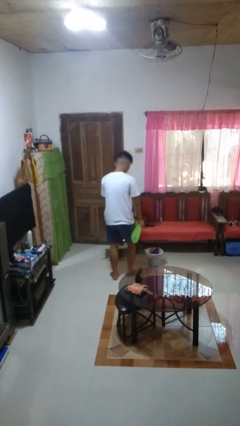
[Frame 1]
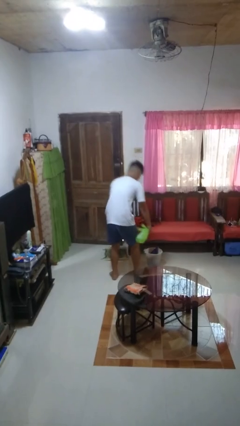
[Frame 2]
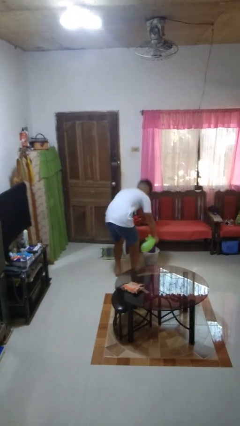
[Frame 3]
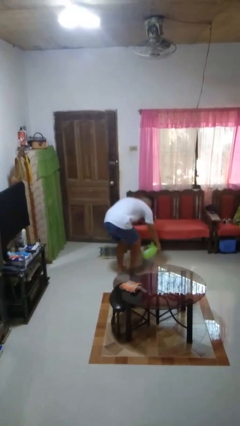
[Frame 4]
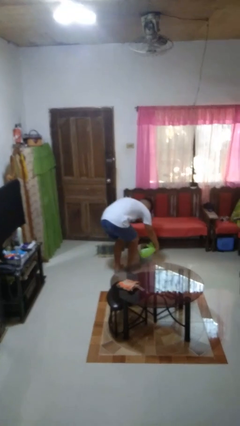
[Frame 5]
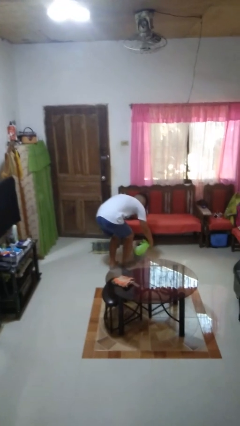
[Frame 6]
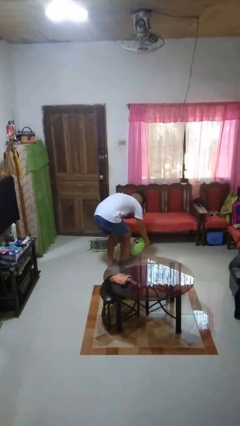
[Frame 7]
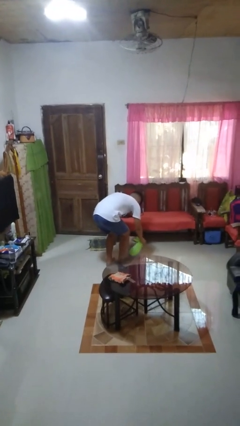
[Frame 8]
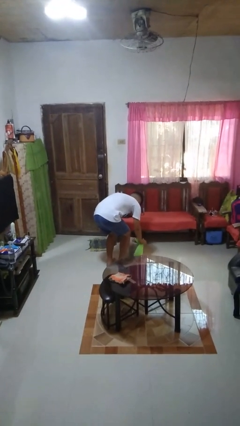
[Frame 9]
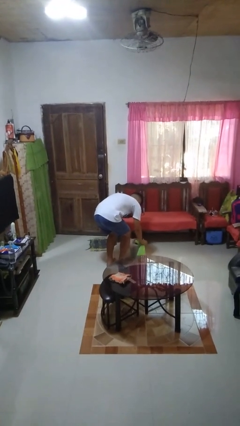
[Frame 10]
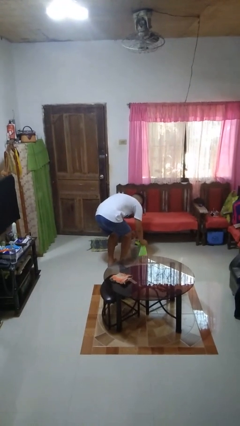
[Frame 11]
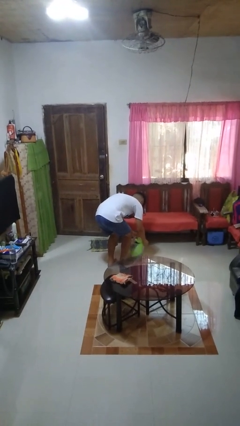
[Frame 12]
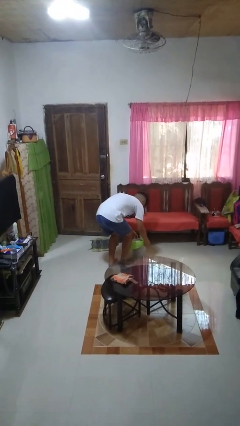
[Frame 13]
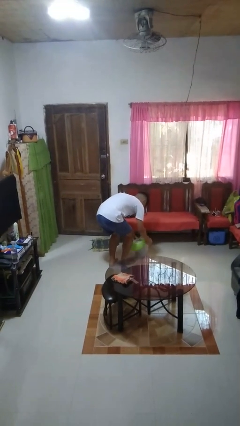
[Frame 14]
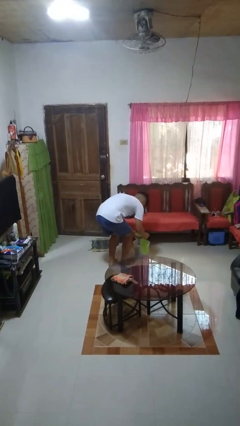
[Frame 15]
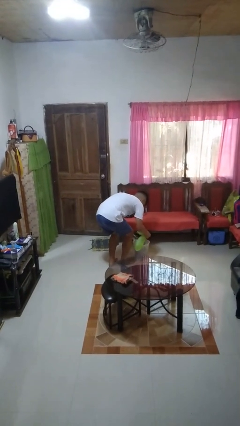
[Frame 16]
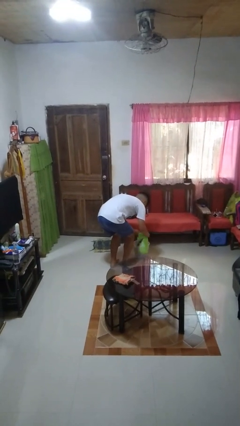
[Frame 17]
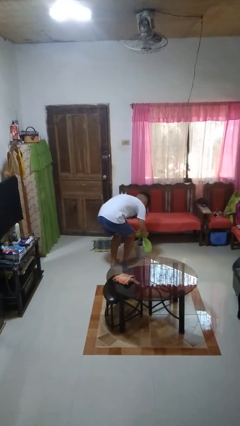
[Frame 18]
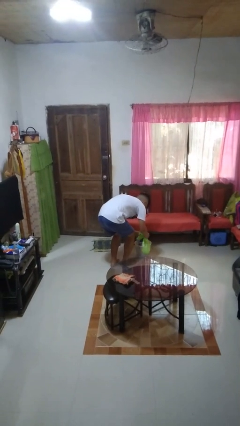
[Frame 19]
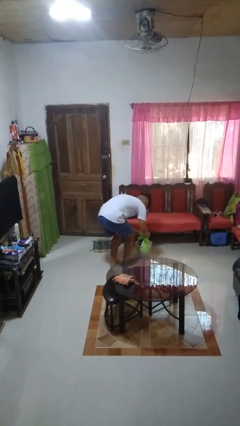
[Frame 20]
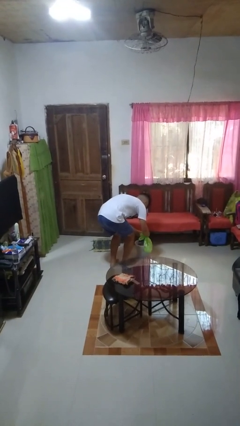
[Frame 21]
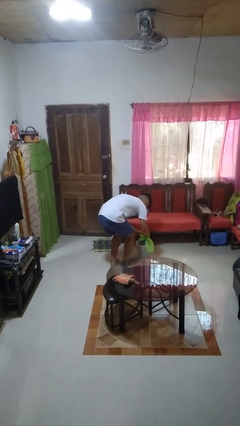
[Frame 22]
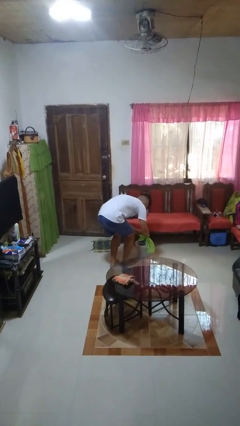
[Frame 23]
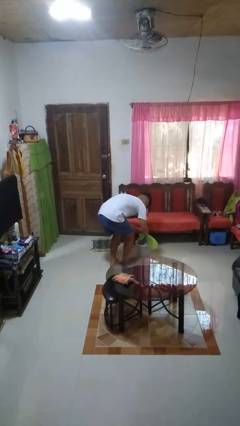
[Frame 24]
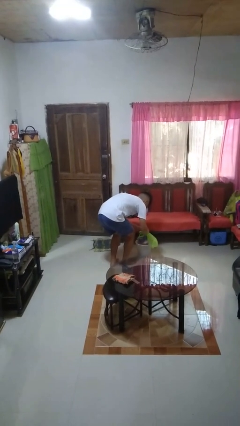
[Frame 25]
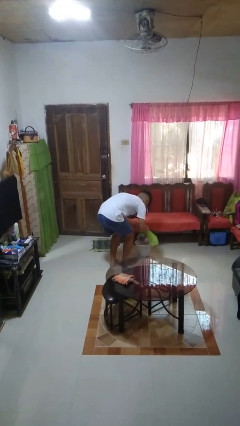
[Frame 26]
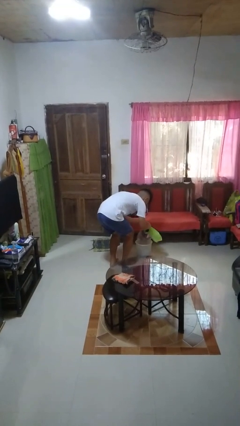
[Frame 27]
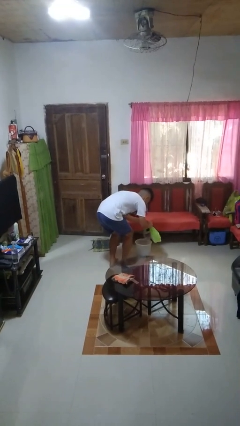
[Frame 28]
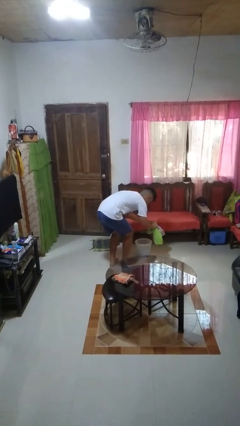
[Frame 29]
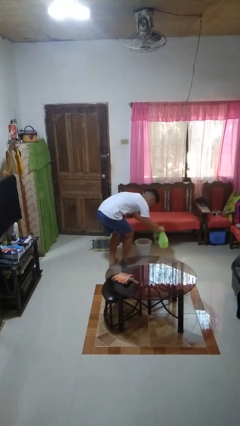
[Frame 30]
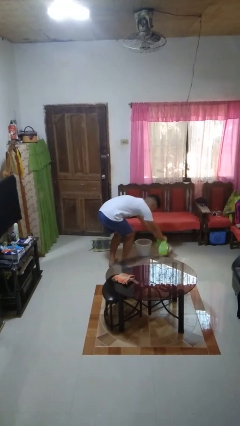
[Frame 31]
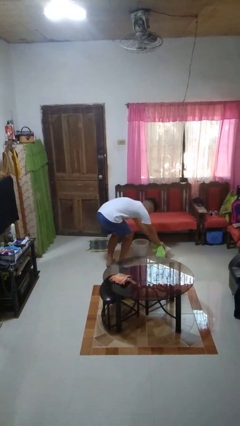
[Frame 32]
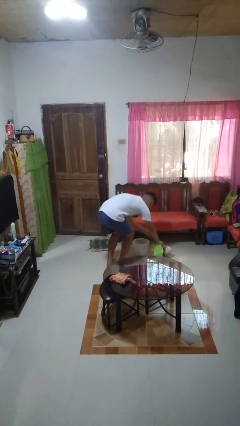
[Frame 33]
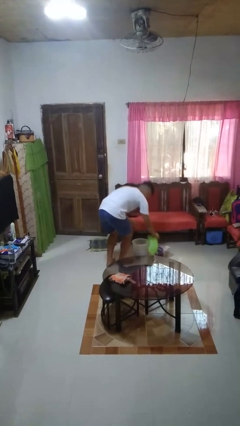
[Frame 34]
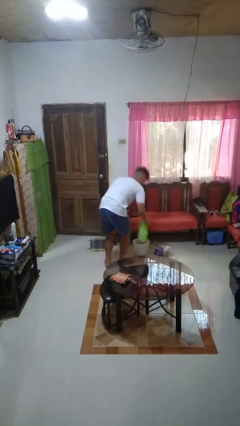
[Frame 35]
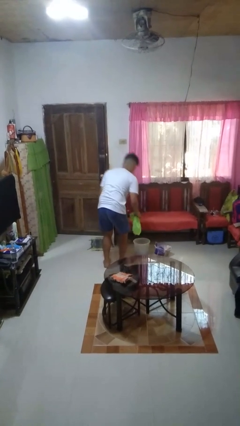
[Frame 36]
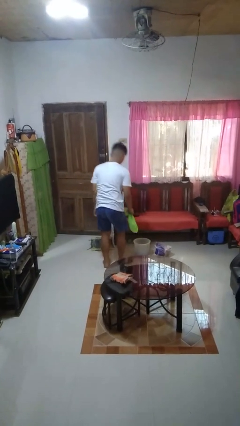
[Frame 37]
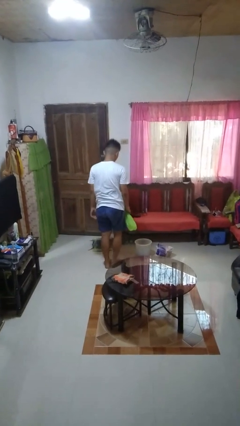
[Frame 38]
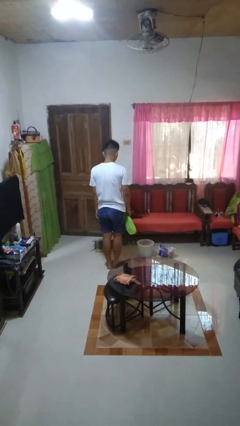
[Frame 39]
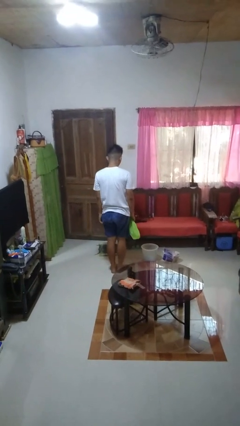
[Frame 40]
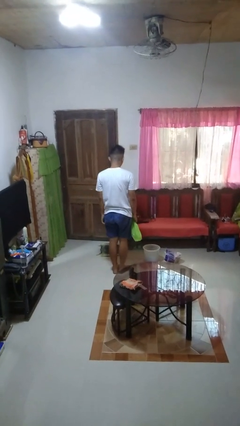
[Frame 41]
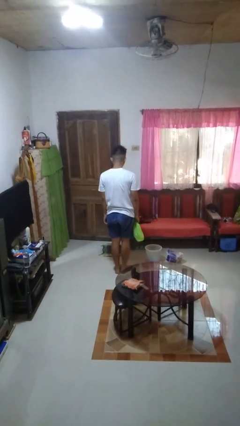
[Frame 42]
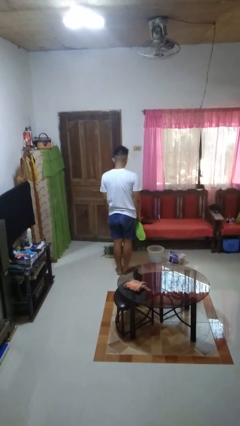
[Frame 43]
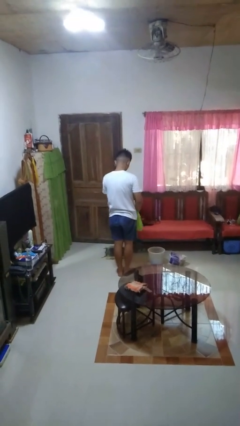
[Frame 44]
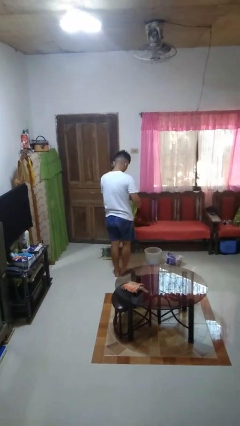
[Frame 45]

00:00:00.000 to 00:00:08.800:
person removes trashbag from trashcan

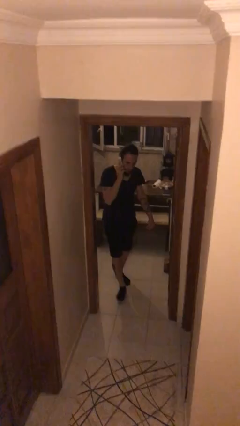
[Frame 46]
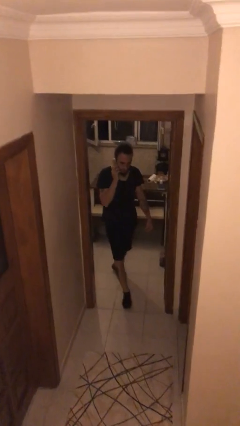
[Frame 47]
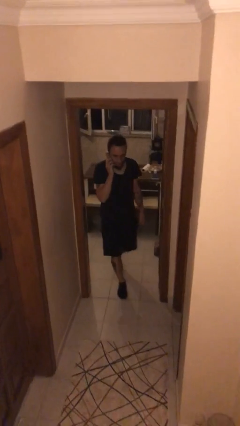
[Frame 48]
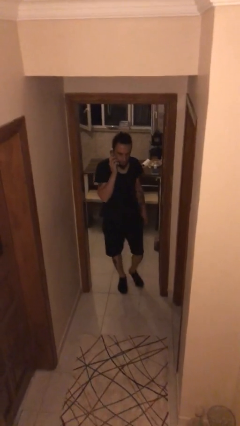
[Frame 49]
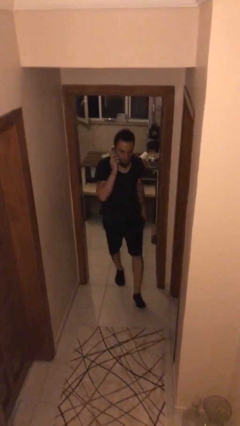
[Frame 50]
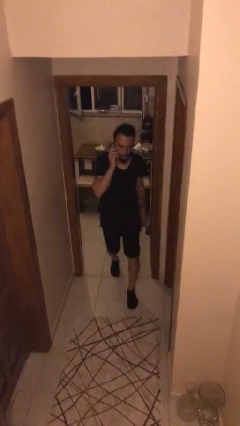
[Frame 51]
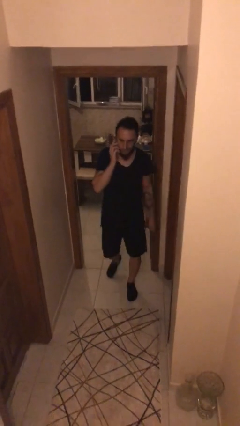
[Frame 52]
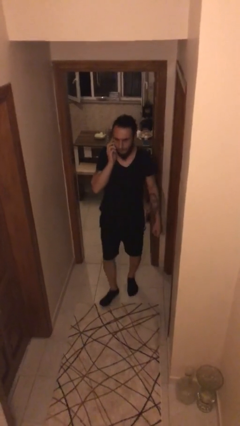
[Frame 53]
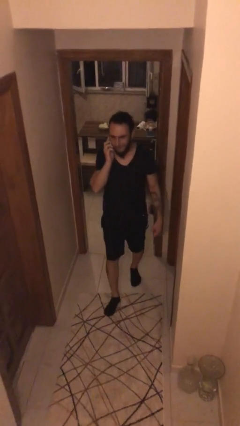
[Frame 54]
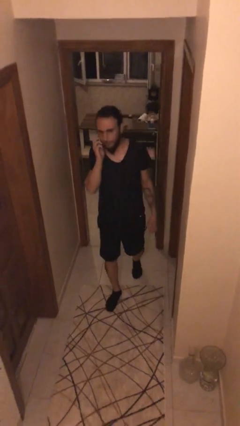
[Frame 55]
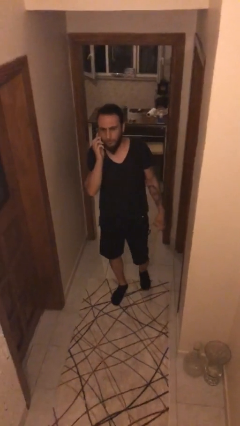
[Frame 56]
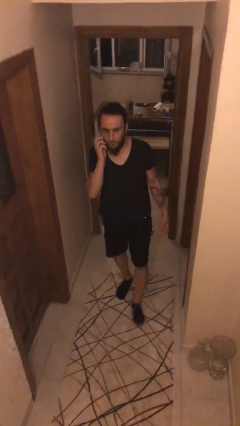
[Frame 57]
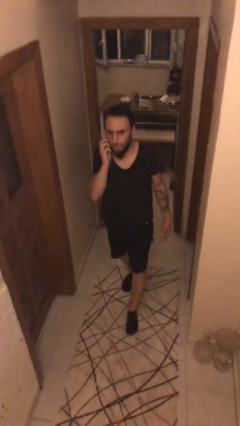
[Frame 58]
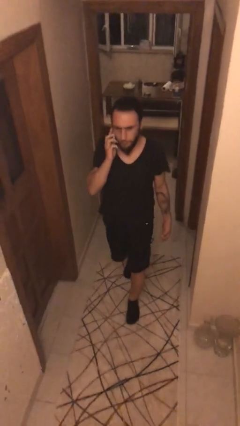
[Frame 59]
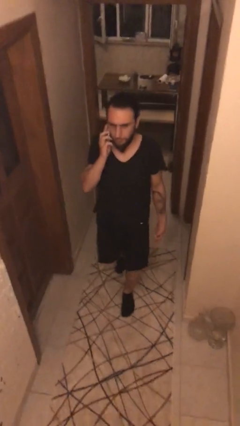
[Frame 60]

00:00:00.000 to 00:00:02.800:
person enters scene through structure

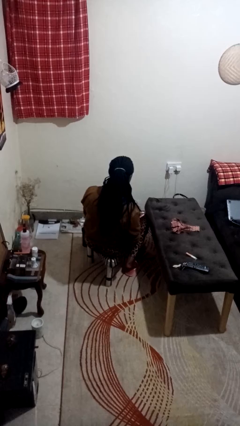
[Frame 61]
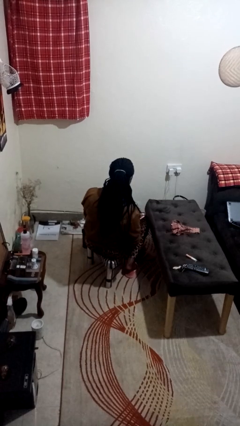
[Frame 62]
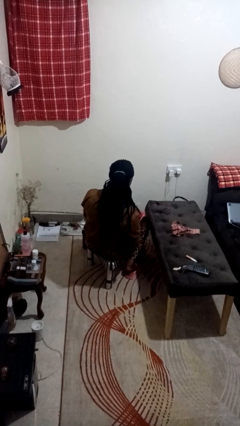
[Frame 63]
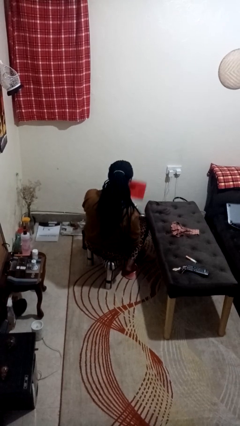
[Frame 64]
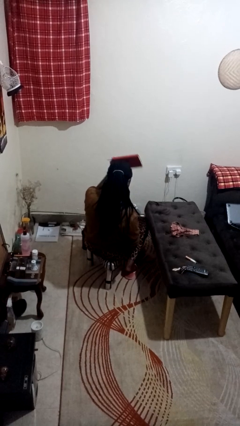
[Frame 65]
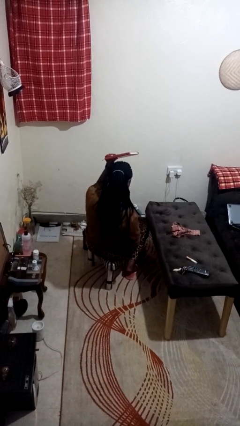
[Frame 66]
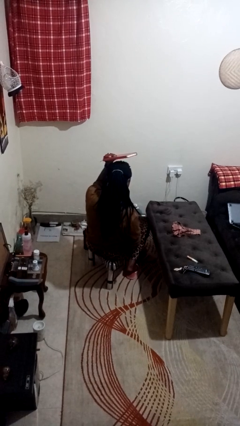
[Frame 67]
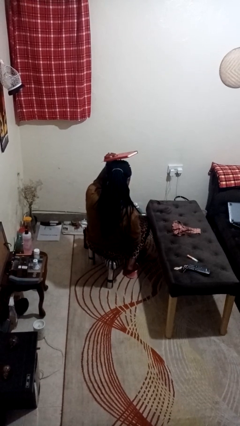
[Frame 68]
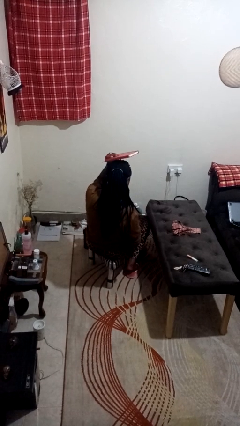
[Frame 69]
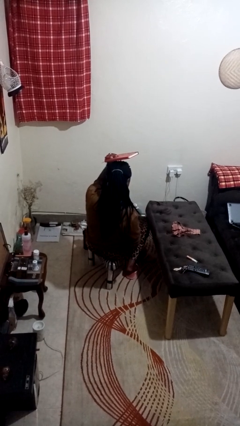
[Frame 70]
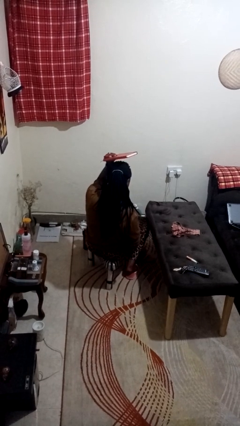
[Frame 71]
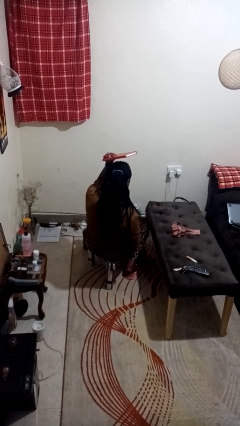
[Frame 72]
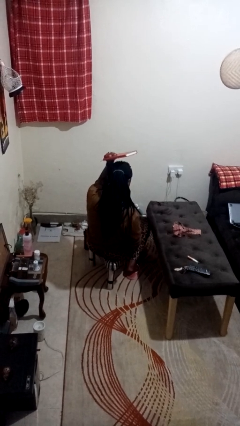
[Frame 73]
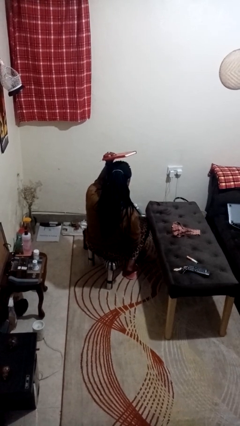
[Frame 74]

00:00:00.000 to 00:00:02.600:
person holds object above head

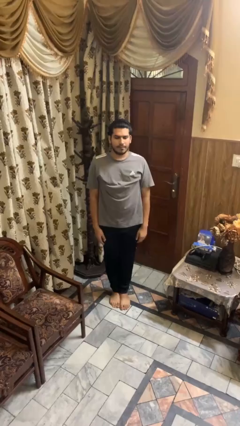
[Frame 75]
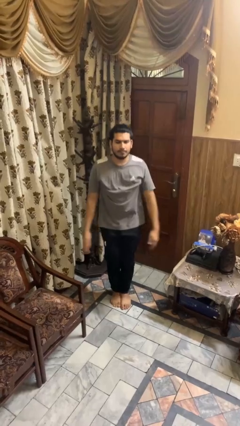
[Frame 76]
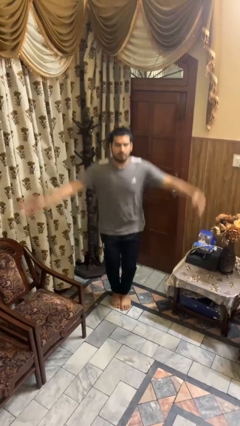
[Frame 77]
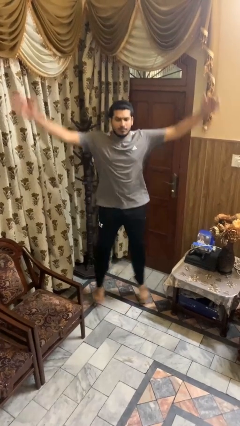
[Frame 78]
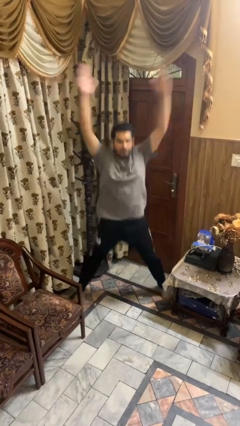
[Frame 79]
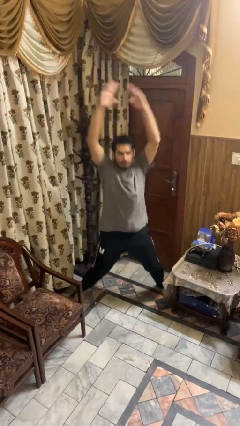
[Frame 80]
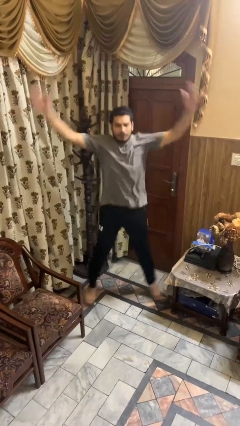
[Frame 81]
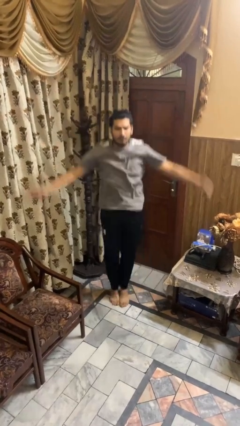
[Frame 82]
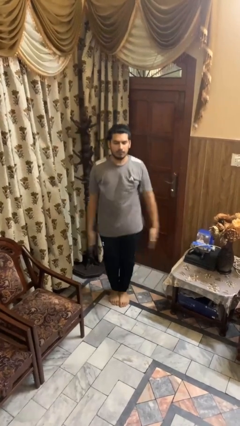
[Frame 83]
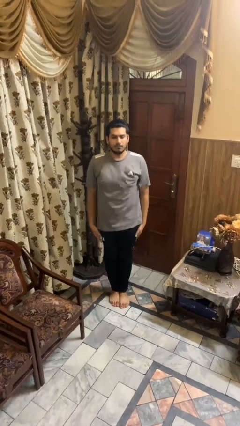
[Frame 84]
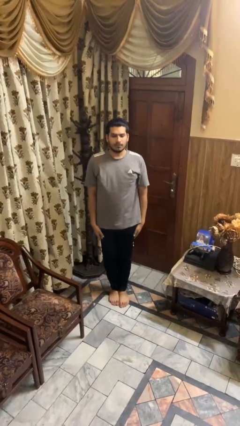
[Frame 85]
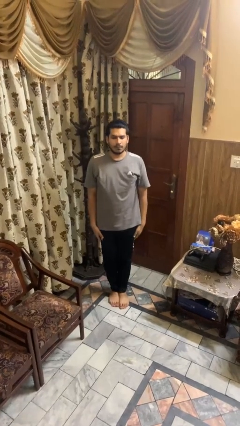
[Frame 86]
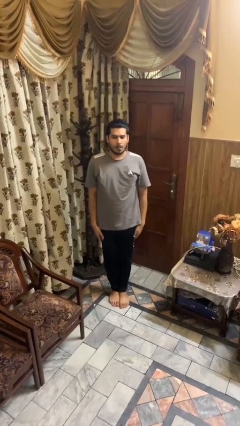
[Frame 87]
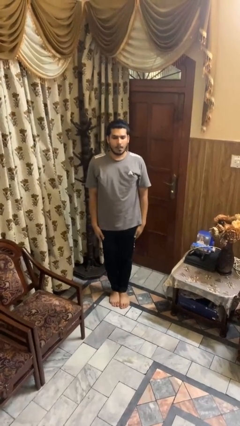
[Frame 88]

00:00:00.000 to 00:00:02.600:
person exercises with jumping jacks

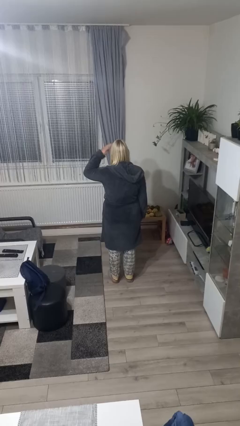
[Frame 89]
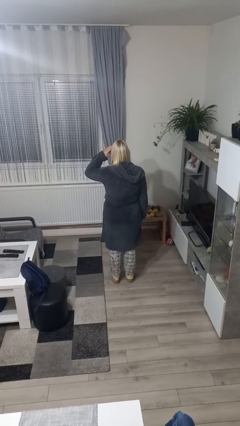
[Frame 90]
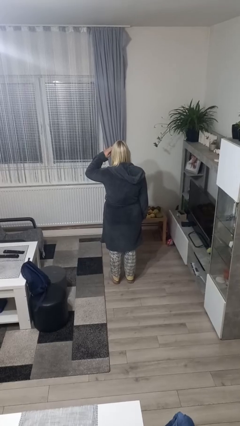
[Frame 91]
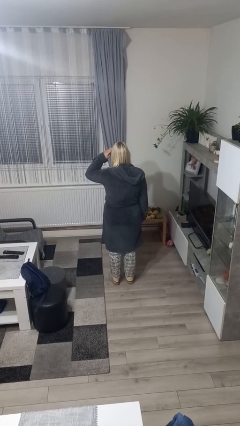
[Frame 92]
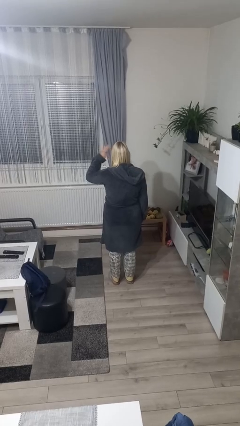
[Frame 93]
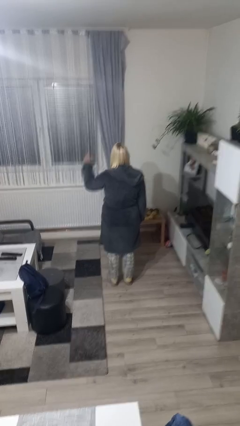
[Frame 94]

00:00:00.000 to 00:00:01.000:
person salutes
